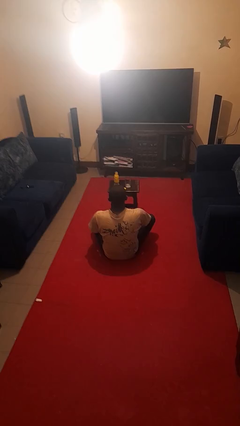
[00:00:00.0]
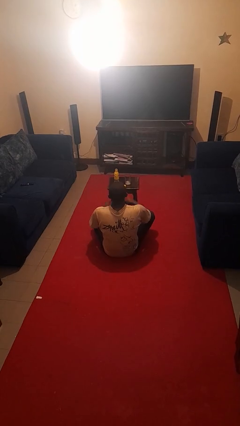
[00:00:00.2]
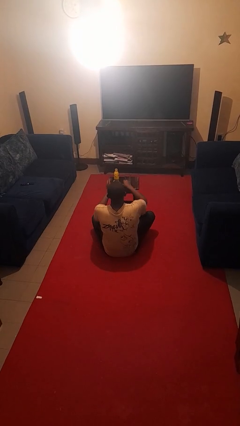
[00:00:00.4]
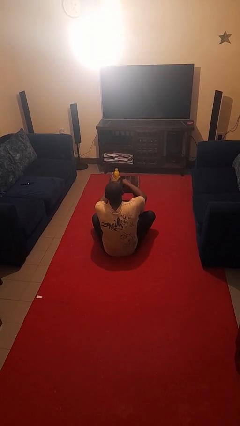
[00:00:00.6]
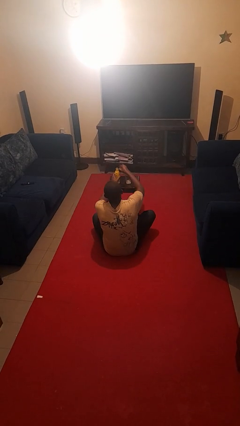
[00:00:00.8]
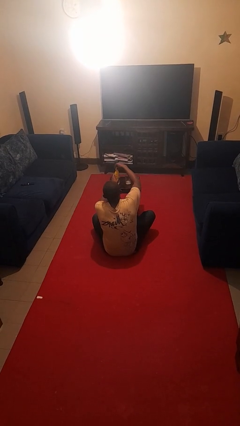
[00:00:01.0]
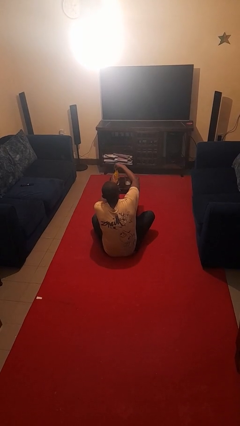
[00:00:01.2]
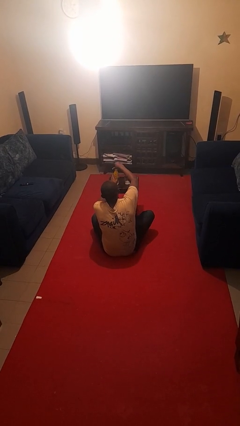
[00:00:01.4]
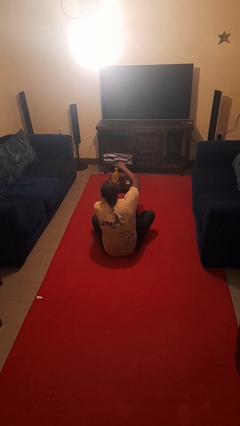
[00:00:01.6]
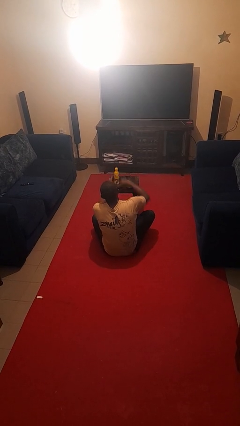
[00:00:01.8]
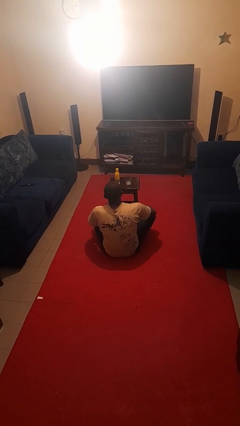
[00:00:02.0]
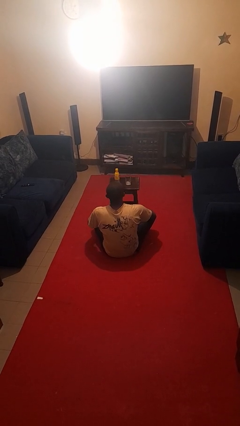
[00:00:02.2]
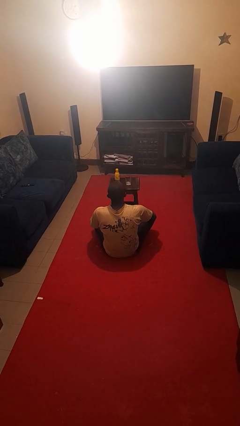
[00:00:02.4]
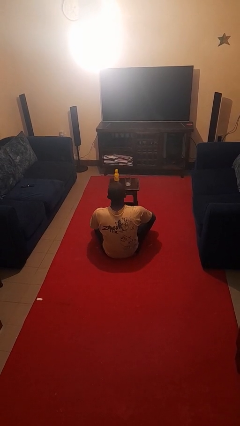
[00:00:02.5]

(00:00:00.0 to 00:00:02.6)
person screws lid to bottle

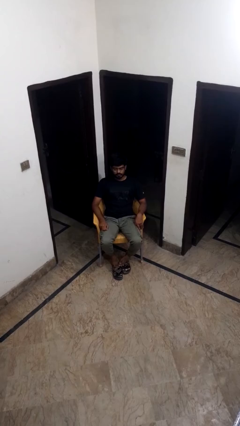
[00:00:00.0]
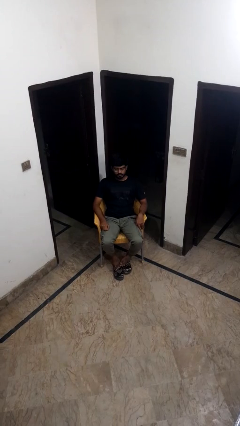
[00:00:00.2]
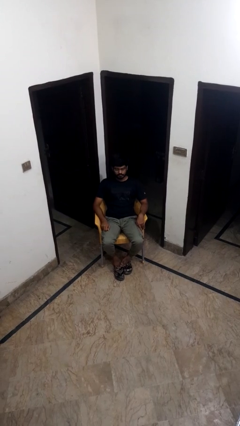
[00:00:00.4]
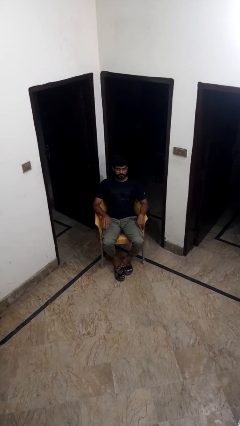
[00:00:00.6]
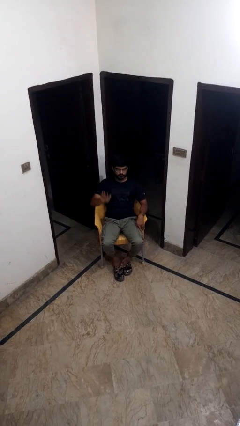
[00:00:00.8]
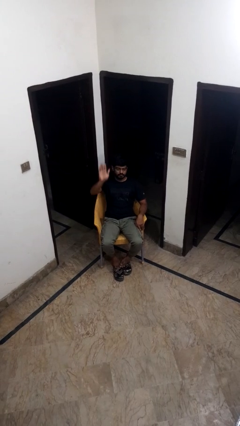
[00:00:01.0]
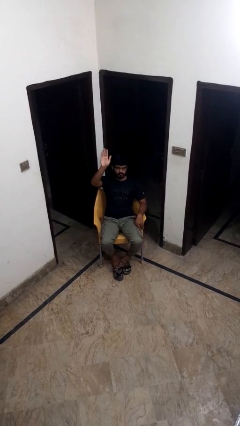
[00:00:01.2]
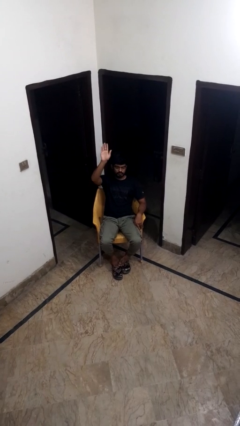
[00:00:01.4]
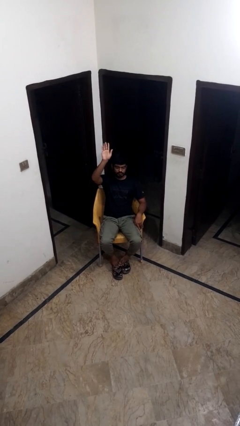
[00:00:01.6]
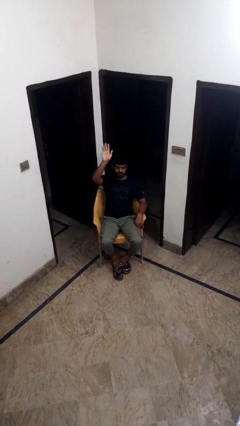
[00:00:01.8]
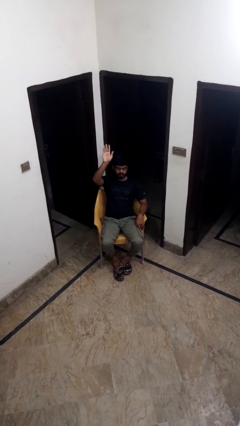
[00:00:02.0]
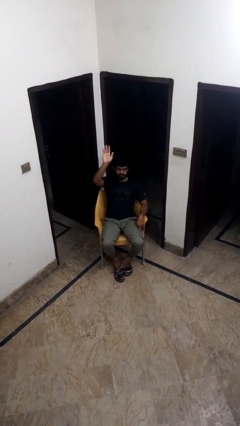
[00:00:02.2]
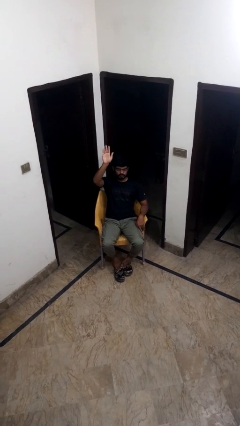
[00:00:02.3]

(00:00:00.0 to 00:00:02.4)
person gestures raise hand

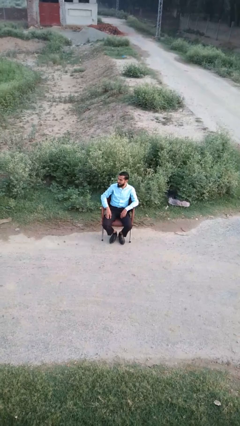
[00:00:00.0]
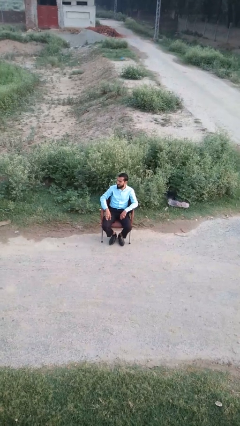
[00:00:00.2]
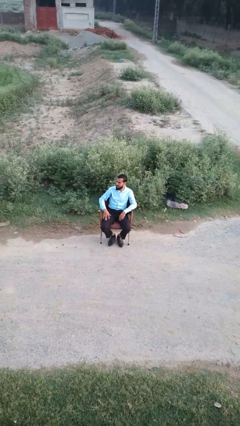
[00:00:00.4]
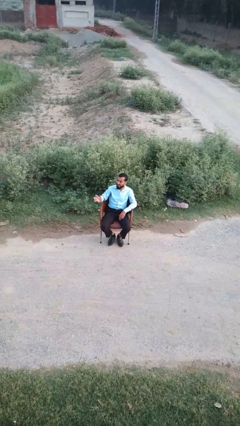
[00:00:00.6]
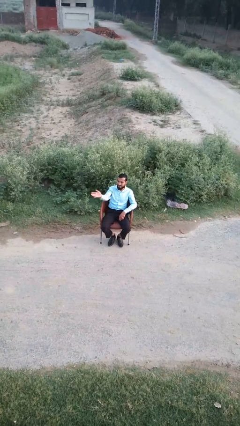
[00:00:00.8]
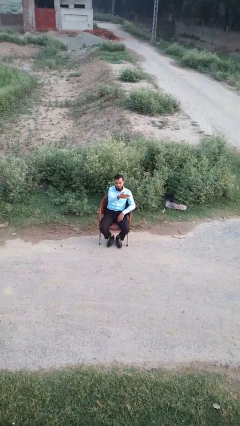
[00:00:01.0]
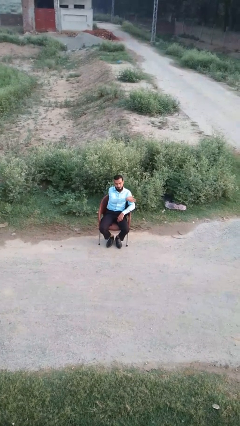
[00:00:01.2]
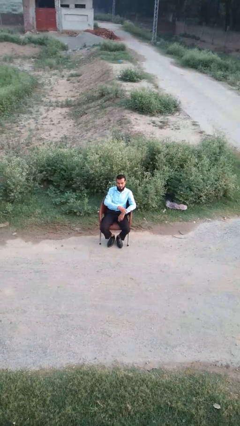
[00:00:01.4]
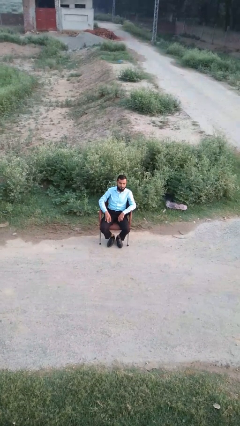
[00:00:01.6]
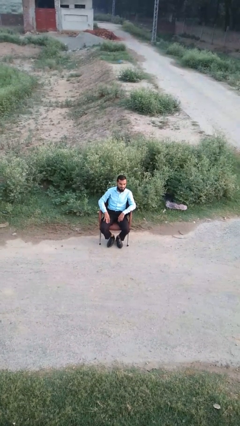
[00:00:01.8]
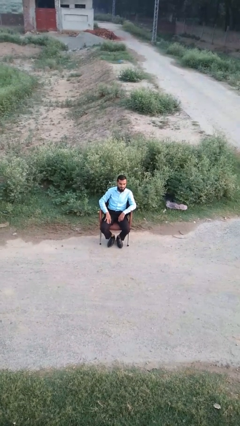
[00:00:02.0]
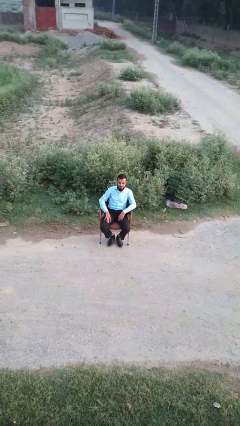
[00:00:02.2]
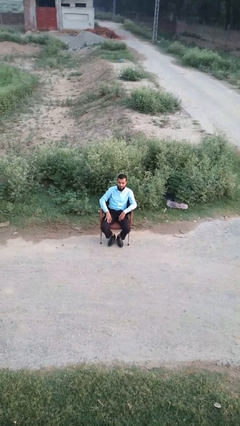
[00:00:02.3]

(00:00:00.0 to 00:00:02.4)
person gestures swipe left

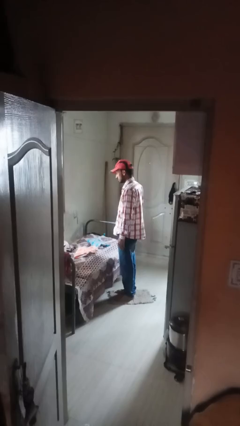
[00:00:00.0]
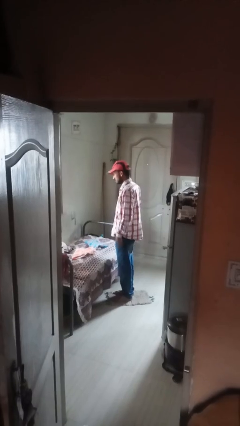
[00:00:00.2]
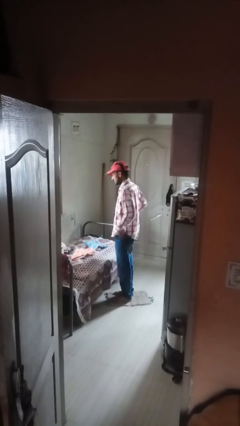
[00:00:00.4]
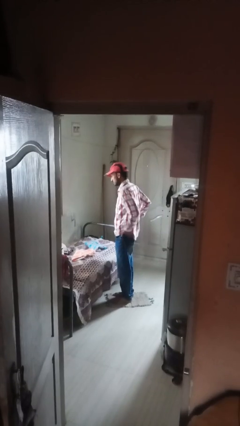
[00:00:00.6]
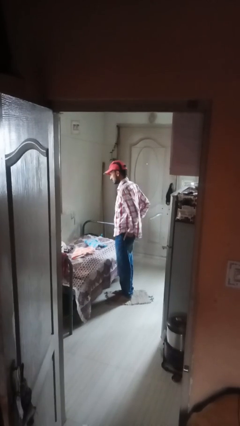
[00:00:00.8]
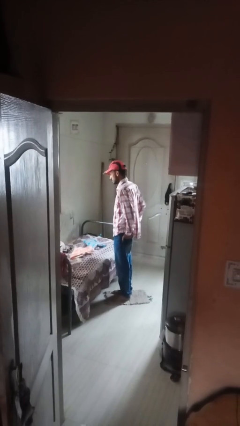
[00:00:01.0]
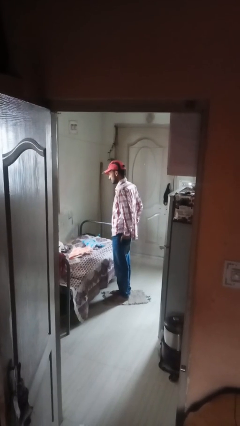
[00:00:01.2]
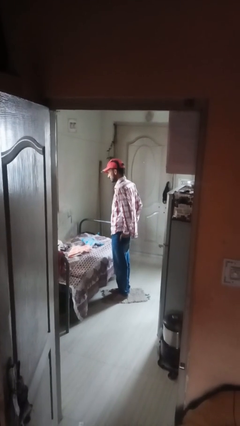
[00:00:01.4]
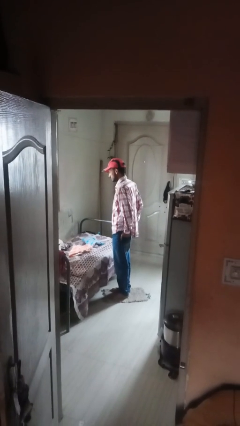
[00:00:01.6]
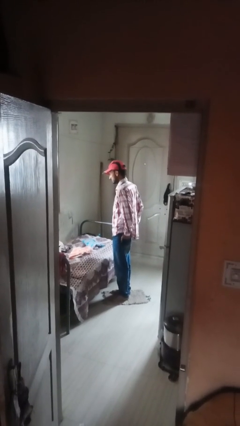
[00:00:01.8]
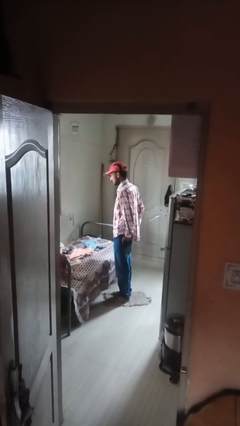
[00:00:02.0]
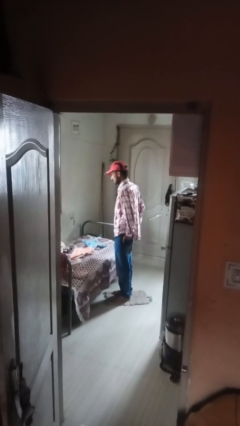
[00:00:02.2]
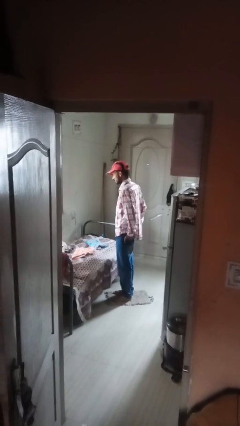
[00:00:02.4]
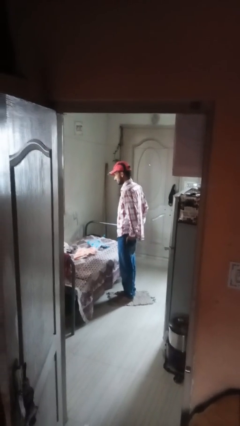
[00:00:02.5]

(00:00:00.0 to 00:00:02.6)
person puts hands in back pockets

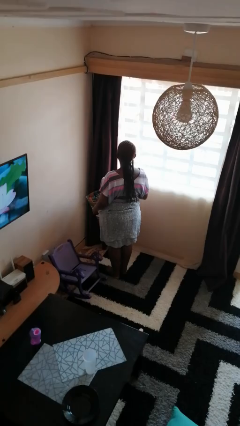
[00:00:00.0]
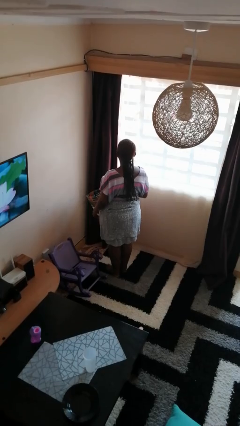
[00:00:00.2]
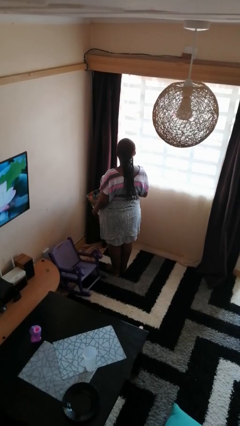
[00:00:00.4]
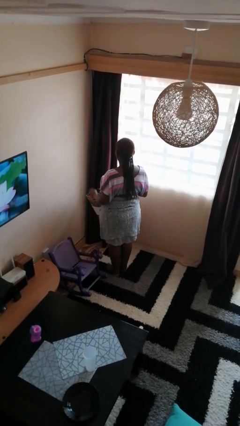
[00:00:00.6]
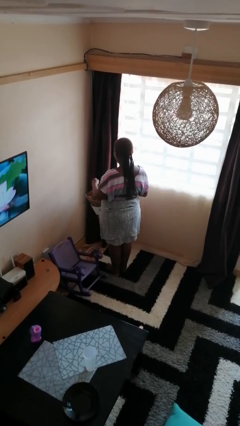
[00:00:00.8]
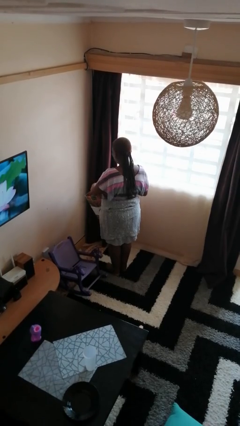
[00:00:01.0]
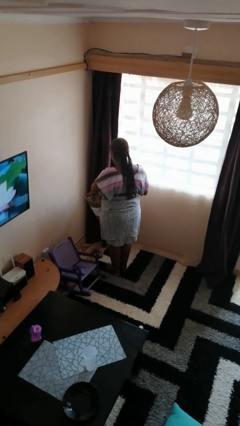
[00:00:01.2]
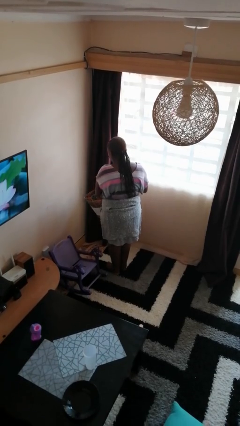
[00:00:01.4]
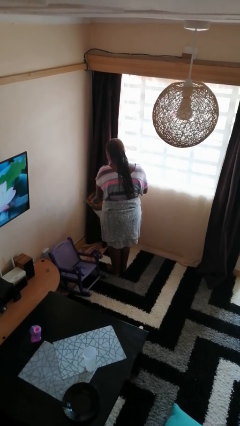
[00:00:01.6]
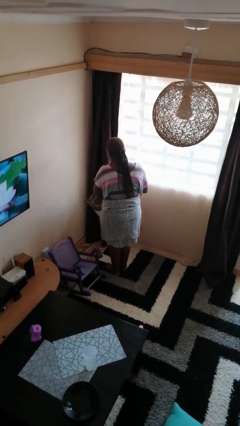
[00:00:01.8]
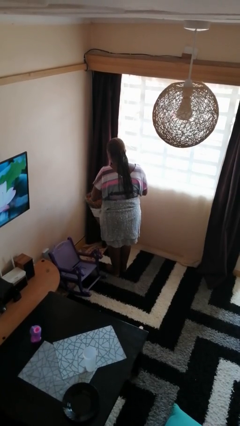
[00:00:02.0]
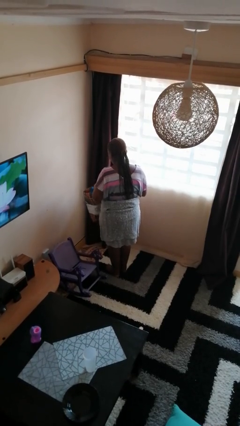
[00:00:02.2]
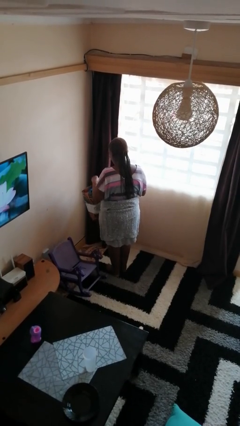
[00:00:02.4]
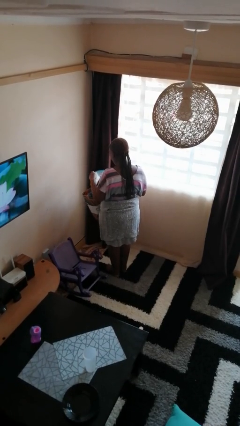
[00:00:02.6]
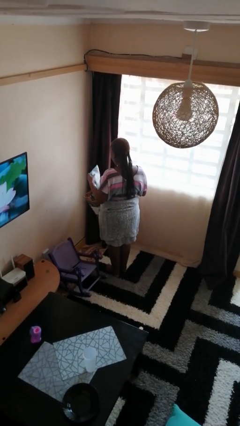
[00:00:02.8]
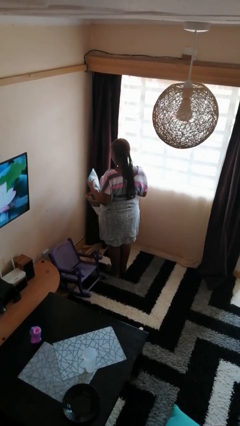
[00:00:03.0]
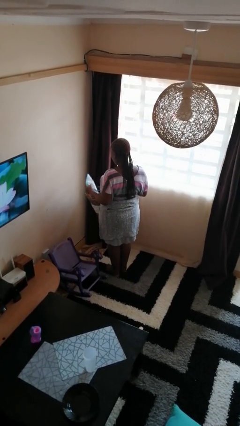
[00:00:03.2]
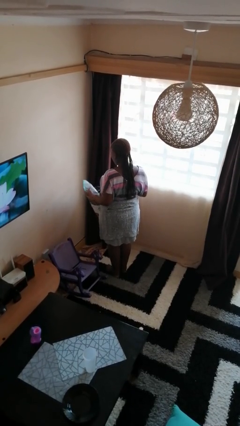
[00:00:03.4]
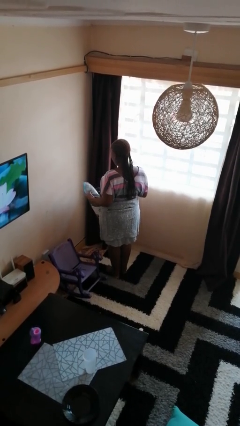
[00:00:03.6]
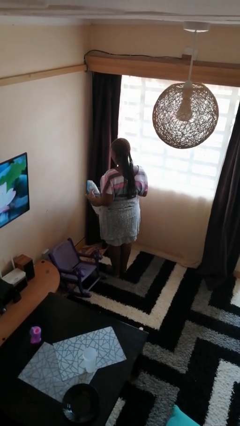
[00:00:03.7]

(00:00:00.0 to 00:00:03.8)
person takes object from bag

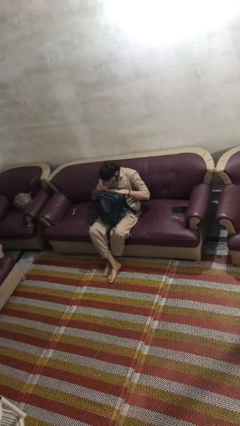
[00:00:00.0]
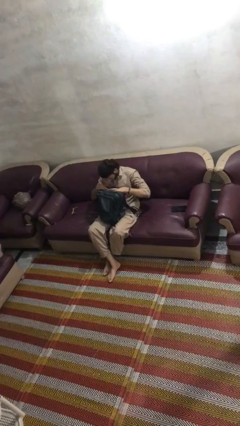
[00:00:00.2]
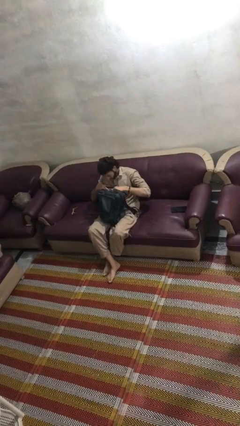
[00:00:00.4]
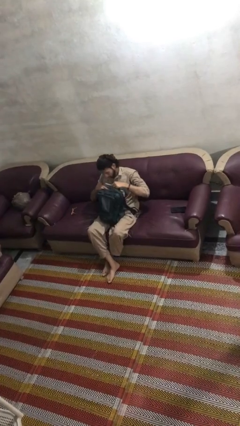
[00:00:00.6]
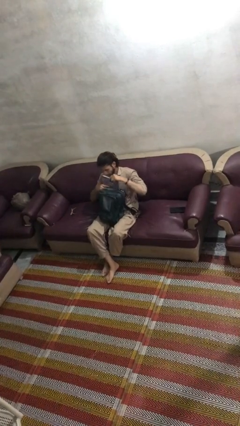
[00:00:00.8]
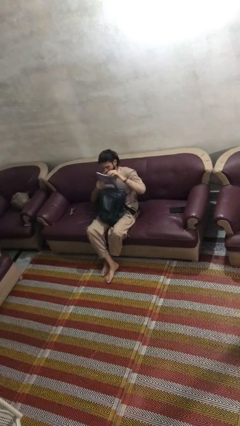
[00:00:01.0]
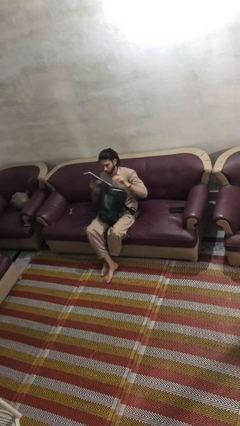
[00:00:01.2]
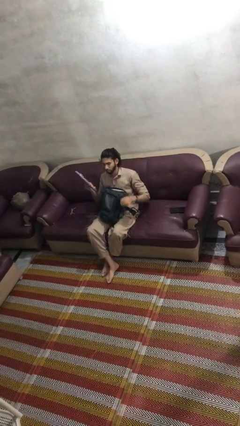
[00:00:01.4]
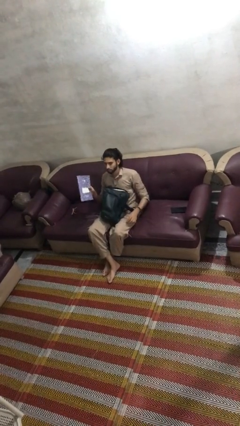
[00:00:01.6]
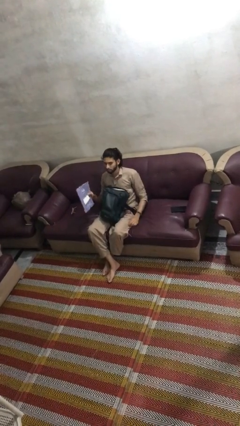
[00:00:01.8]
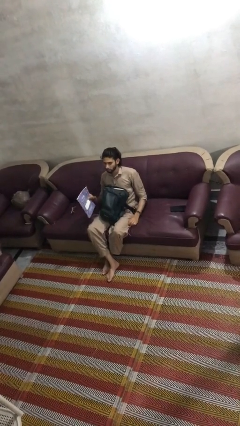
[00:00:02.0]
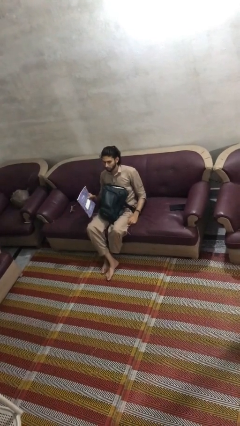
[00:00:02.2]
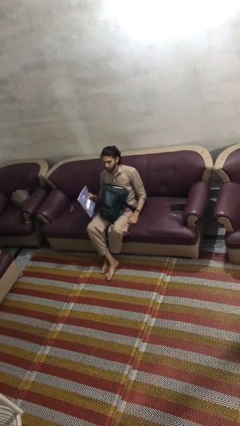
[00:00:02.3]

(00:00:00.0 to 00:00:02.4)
person takes object from backpack

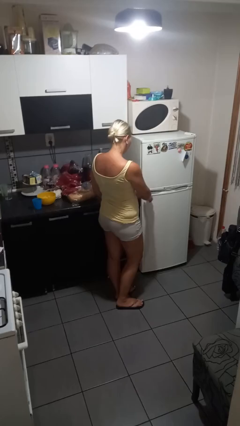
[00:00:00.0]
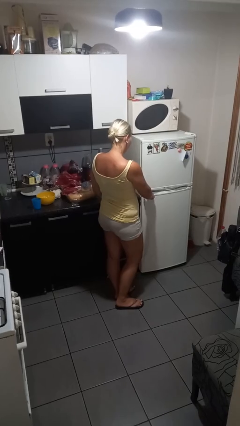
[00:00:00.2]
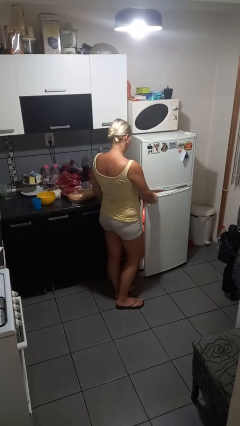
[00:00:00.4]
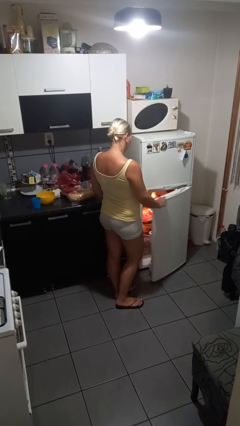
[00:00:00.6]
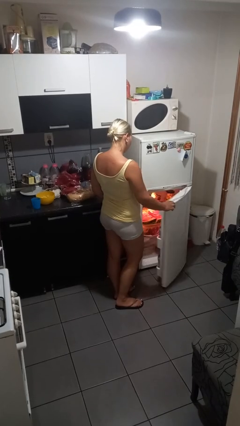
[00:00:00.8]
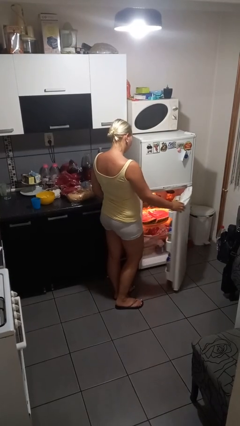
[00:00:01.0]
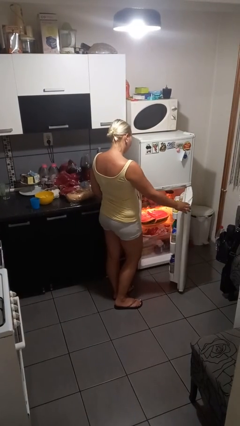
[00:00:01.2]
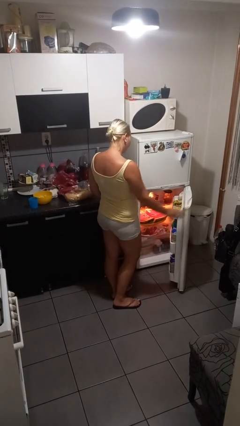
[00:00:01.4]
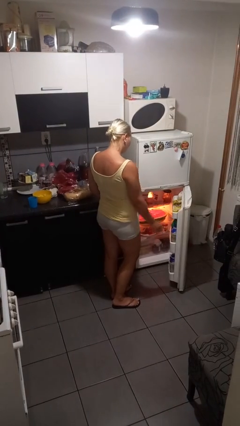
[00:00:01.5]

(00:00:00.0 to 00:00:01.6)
person opens refrigerator
